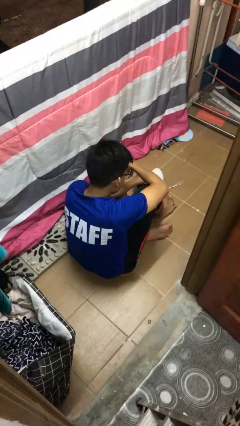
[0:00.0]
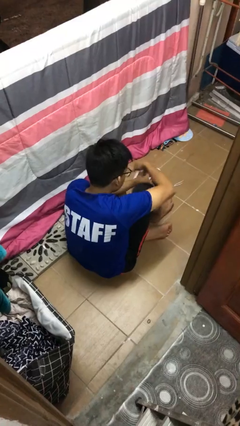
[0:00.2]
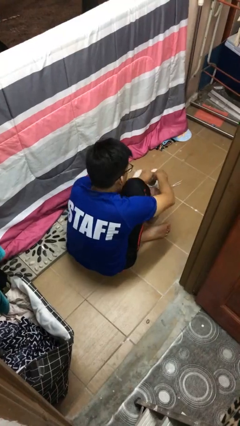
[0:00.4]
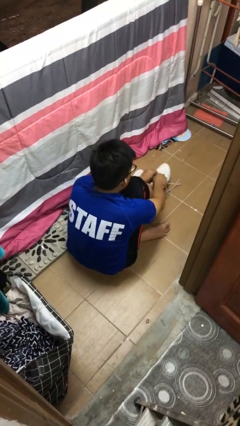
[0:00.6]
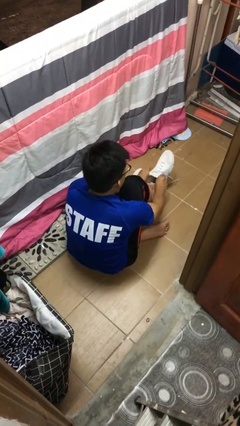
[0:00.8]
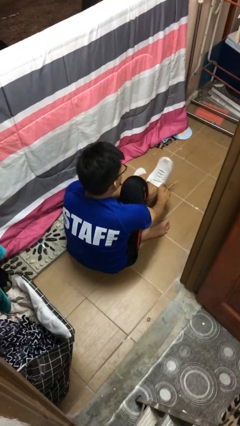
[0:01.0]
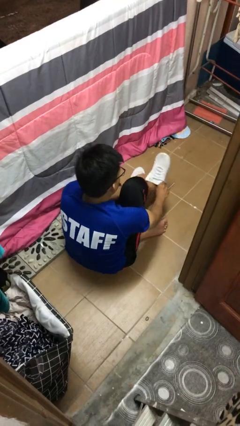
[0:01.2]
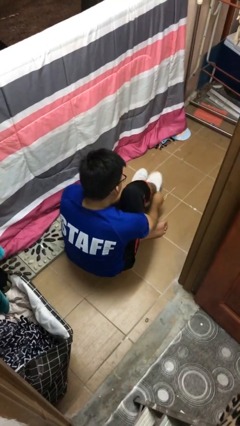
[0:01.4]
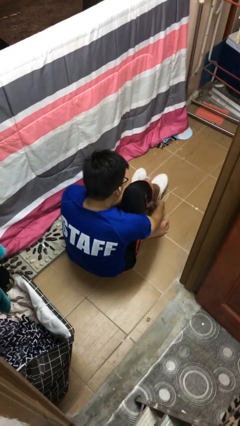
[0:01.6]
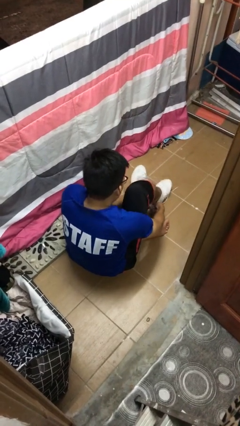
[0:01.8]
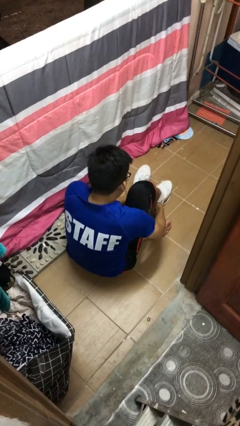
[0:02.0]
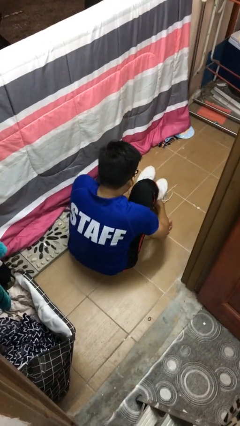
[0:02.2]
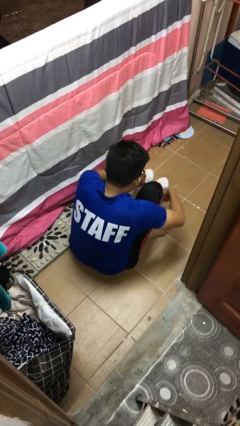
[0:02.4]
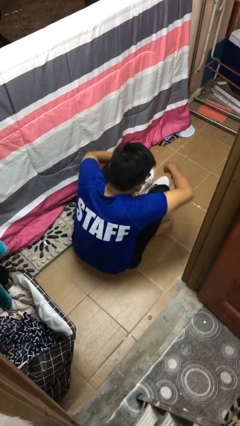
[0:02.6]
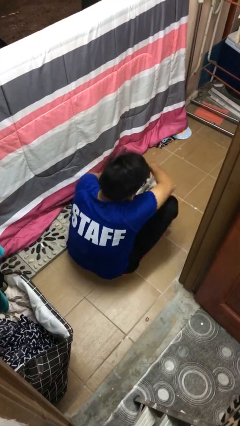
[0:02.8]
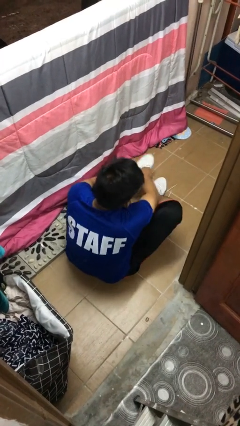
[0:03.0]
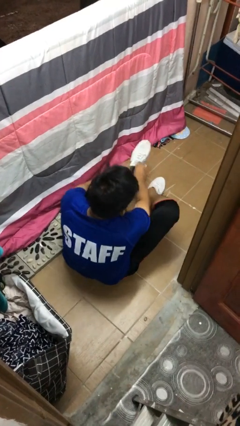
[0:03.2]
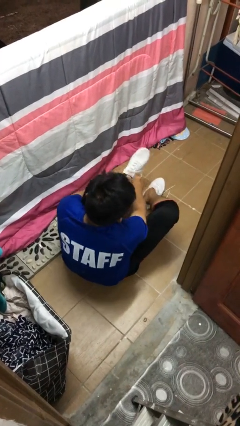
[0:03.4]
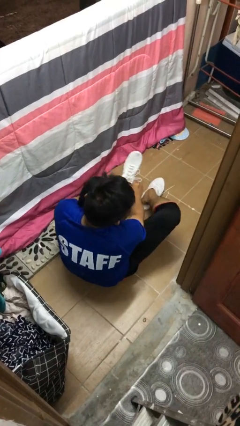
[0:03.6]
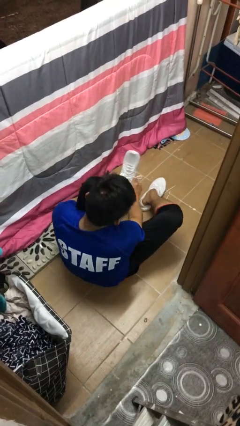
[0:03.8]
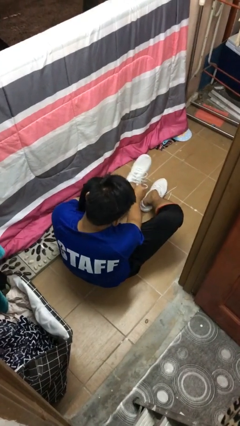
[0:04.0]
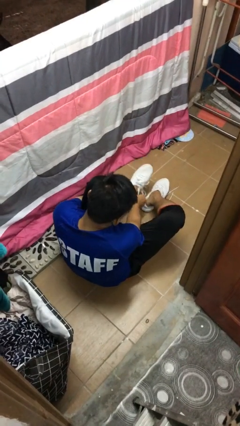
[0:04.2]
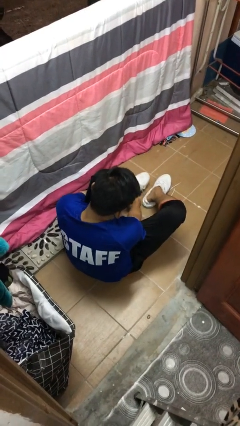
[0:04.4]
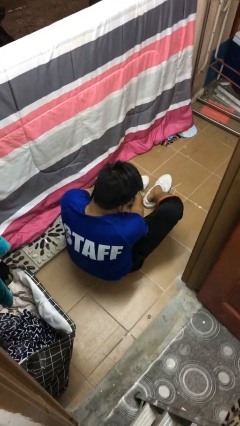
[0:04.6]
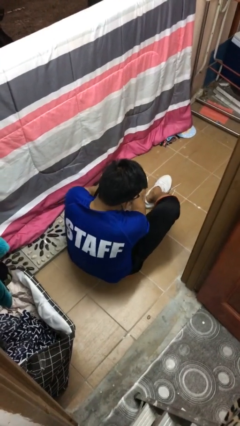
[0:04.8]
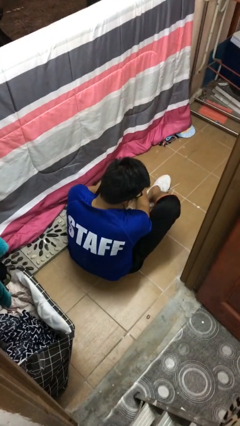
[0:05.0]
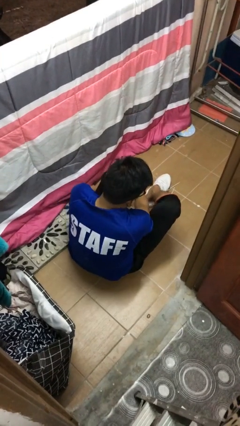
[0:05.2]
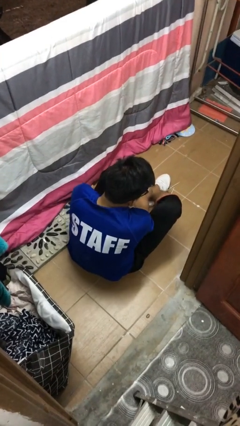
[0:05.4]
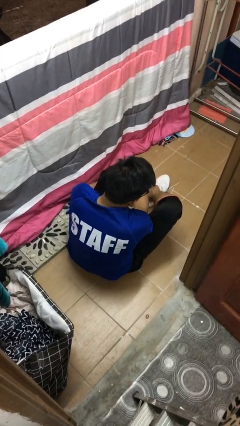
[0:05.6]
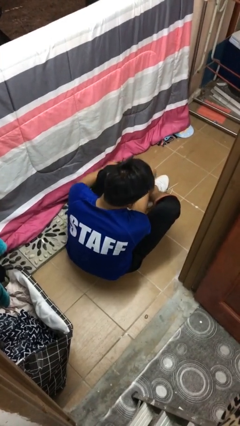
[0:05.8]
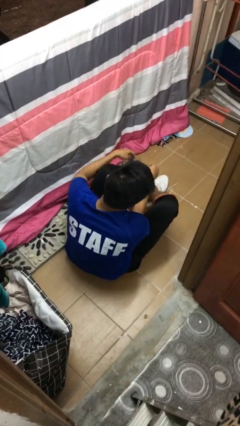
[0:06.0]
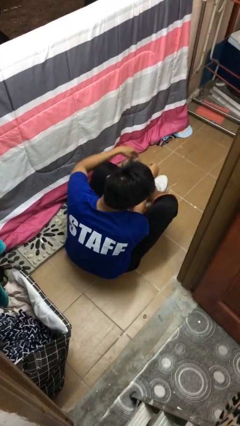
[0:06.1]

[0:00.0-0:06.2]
person puts on shoes

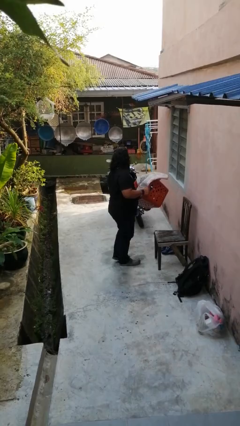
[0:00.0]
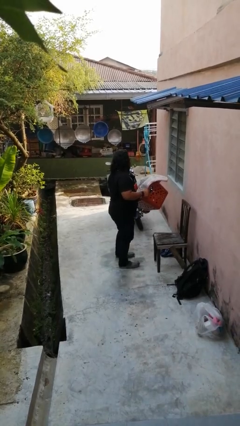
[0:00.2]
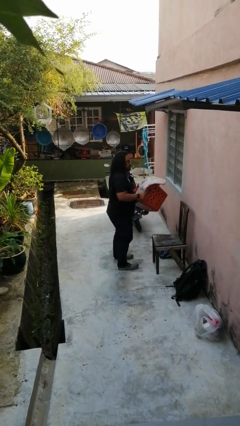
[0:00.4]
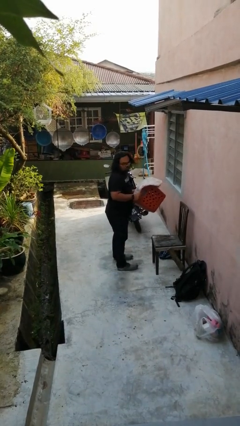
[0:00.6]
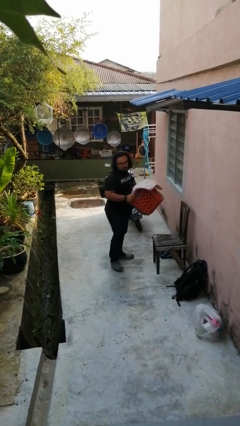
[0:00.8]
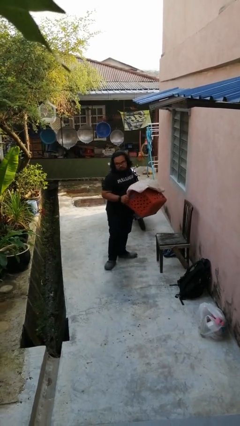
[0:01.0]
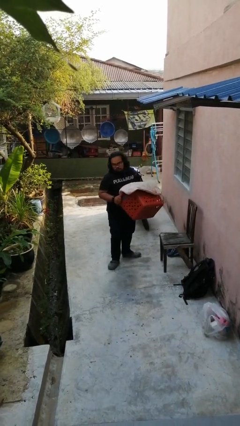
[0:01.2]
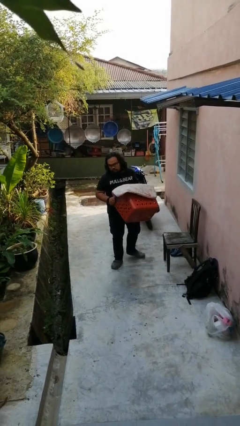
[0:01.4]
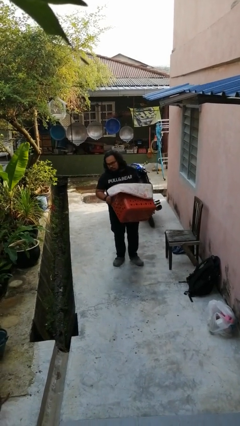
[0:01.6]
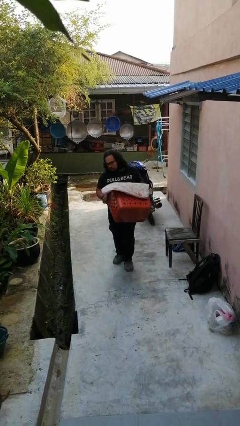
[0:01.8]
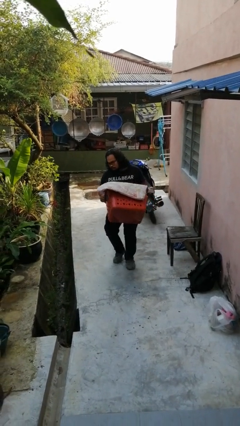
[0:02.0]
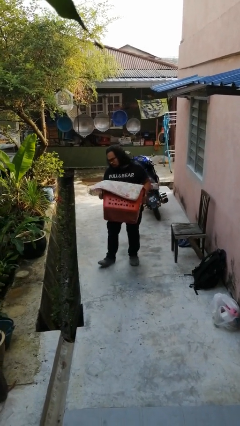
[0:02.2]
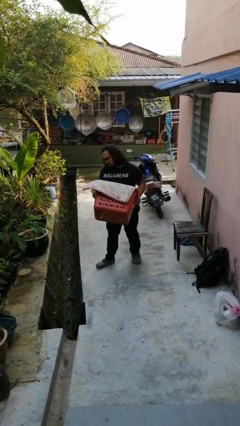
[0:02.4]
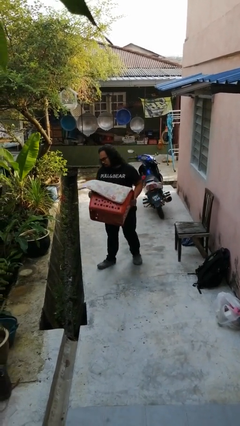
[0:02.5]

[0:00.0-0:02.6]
person carries laundry basket

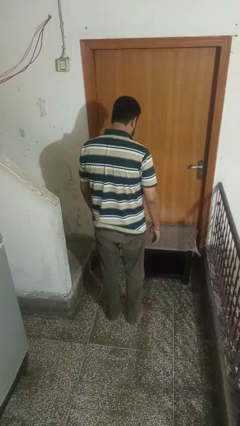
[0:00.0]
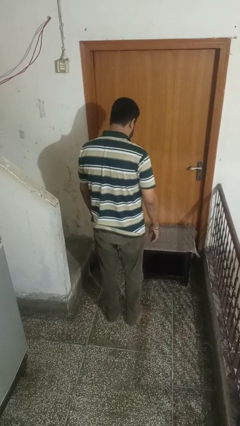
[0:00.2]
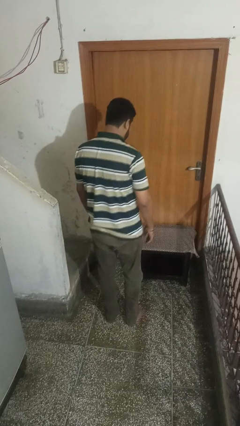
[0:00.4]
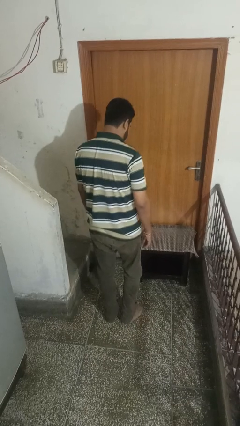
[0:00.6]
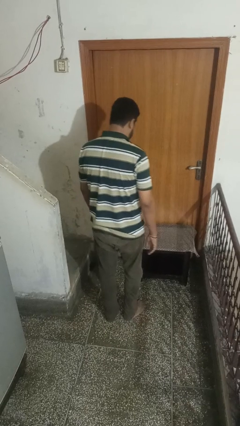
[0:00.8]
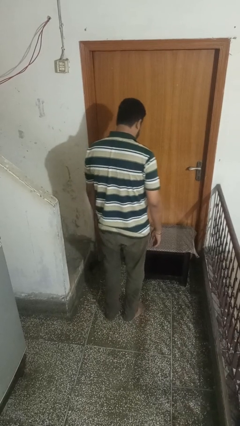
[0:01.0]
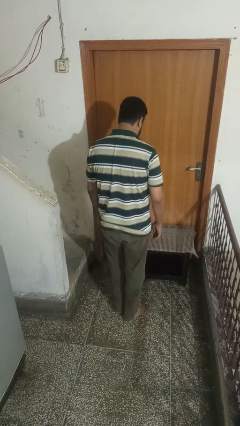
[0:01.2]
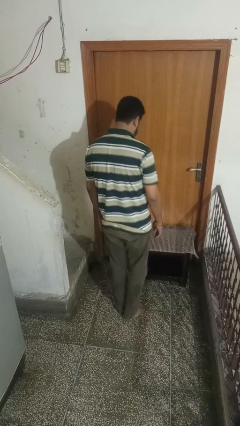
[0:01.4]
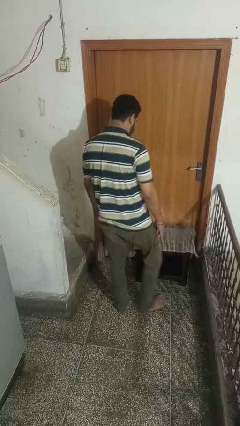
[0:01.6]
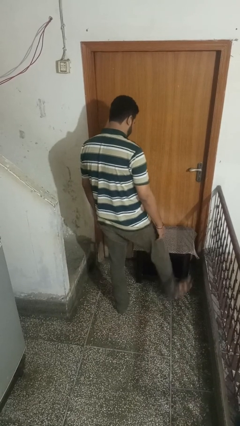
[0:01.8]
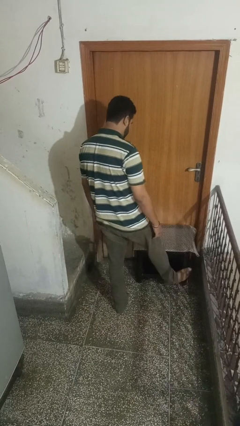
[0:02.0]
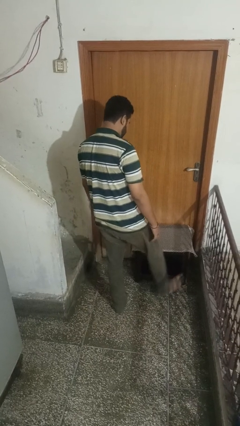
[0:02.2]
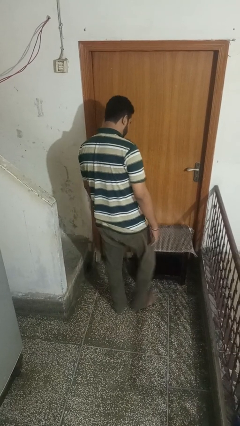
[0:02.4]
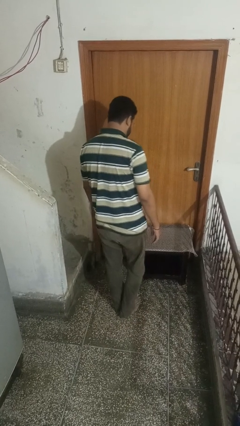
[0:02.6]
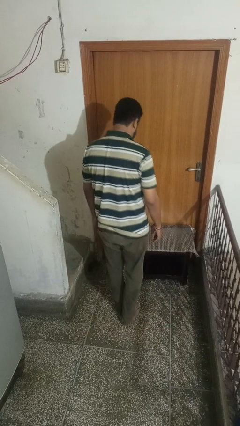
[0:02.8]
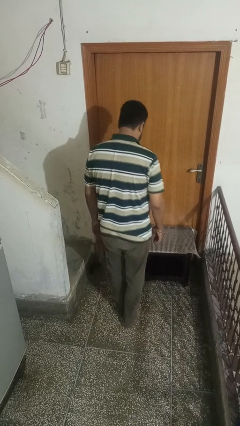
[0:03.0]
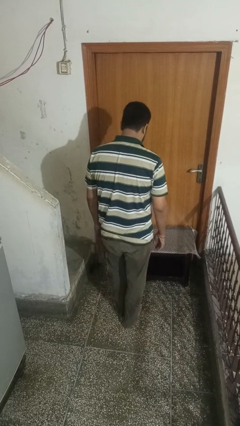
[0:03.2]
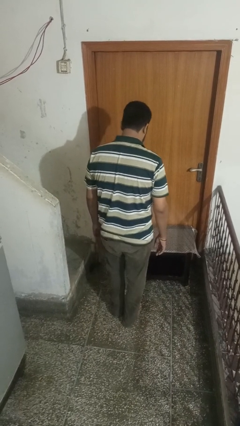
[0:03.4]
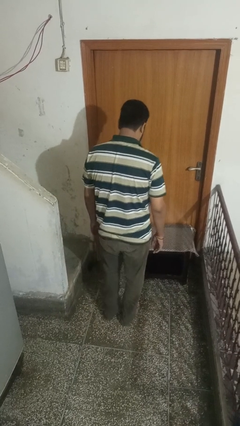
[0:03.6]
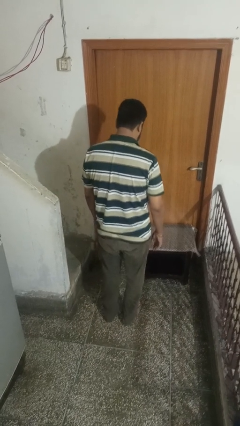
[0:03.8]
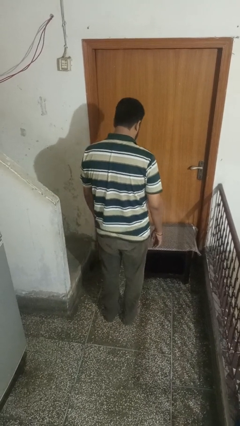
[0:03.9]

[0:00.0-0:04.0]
person stubs toe

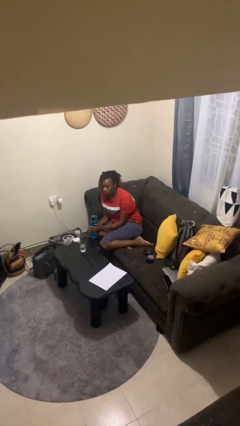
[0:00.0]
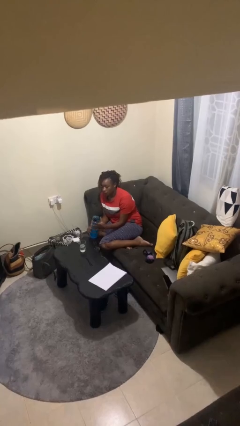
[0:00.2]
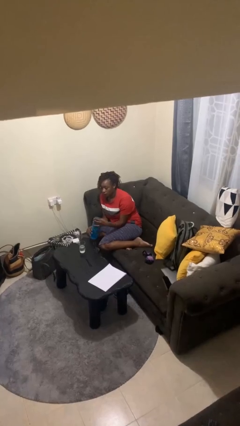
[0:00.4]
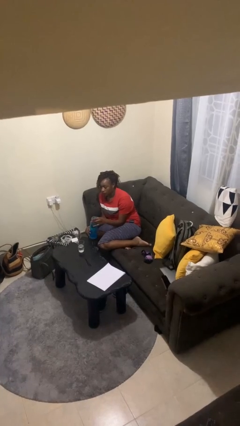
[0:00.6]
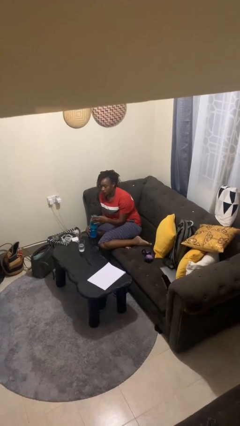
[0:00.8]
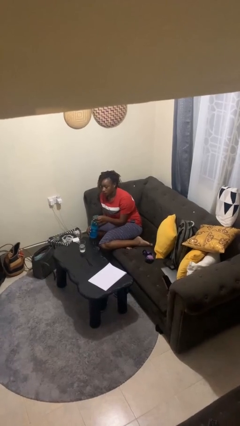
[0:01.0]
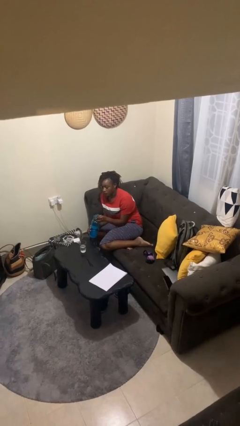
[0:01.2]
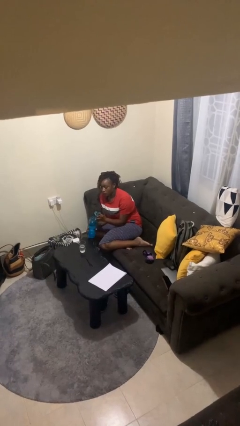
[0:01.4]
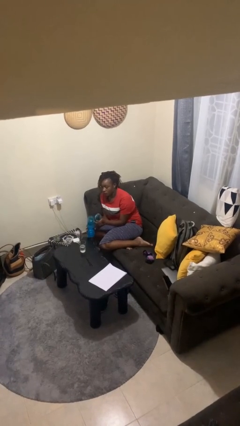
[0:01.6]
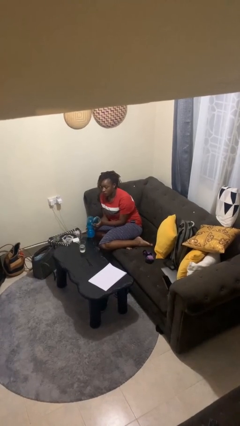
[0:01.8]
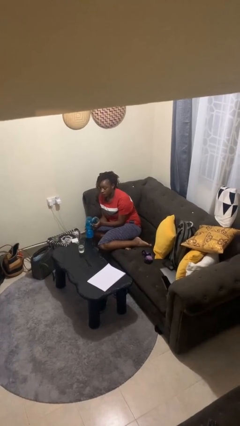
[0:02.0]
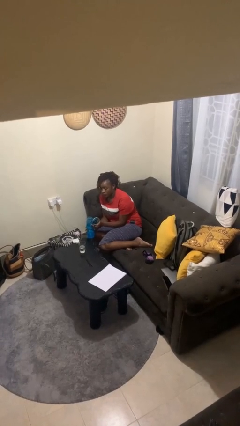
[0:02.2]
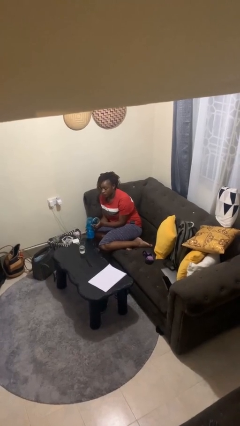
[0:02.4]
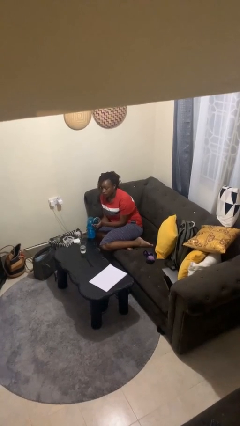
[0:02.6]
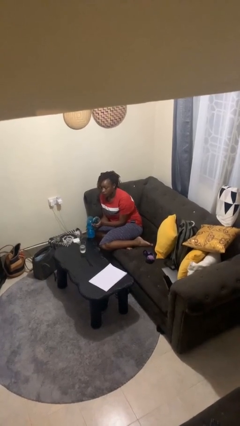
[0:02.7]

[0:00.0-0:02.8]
person unscrews lid from bottle

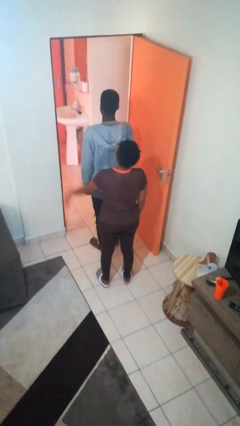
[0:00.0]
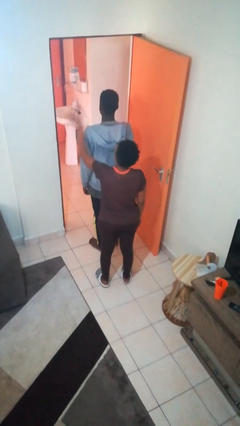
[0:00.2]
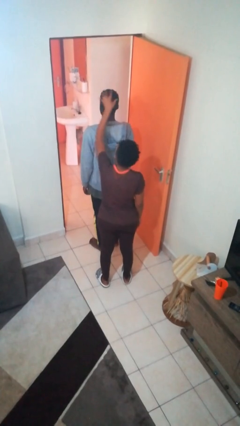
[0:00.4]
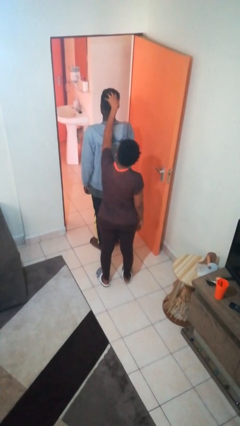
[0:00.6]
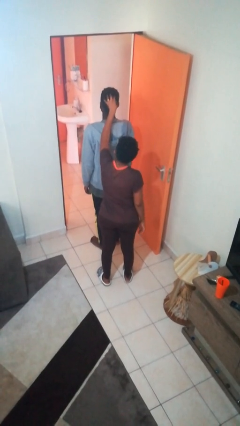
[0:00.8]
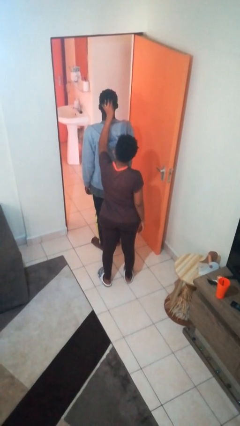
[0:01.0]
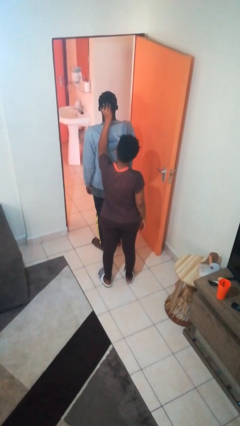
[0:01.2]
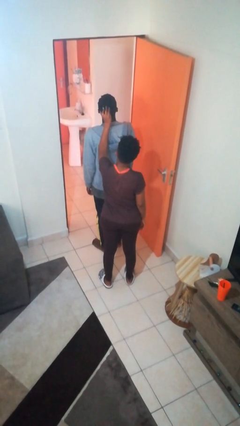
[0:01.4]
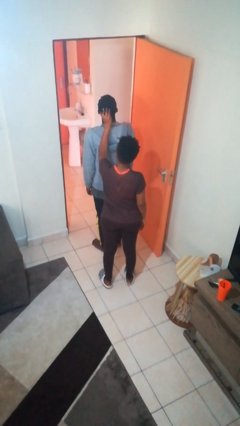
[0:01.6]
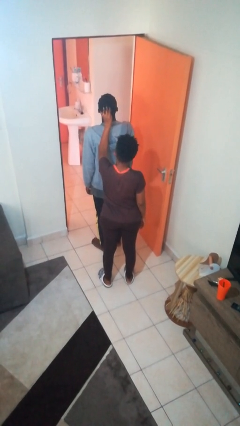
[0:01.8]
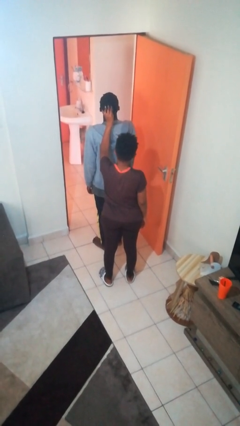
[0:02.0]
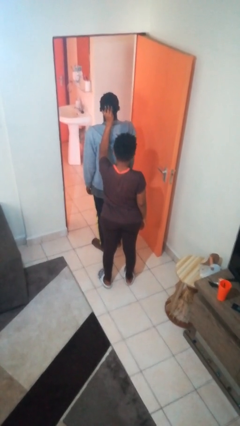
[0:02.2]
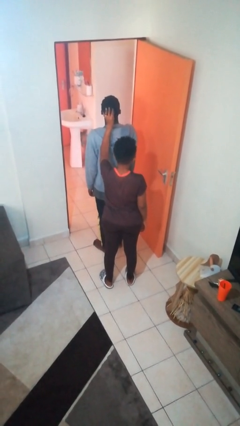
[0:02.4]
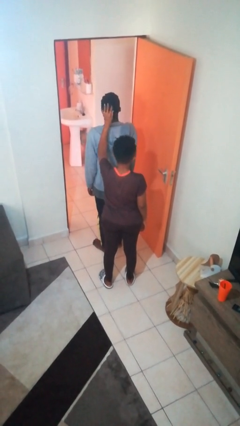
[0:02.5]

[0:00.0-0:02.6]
person grabs person by hair
